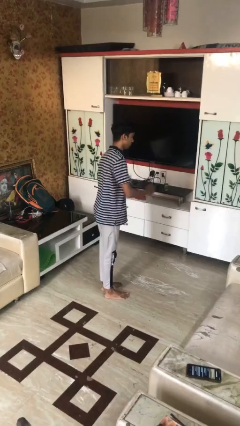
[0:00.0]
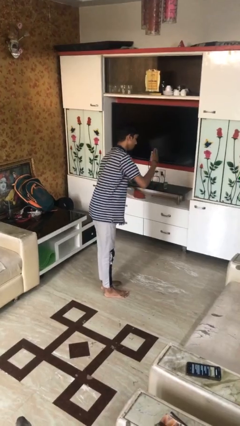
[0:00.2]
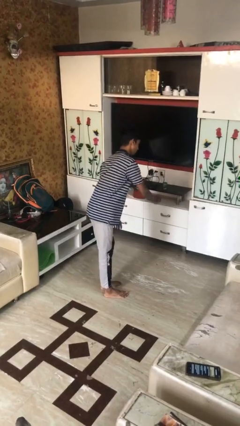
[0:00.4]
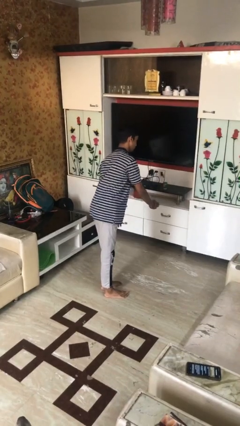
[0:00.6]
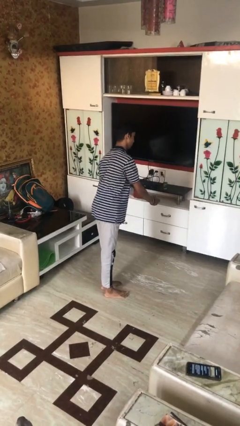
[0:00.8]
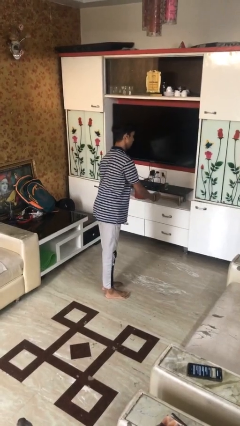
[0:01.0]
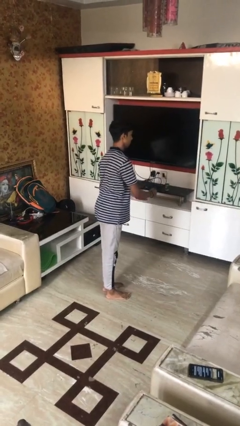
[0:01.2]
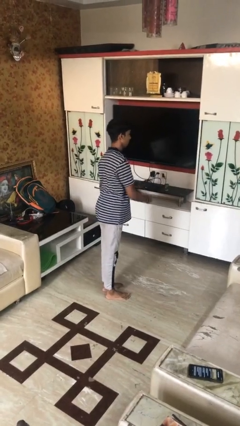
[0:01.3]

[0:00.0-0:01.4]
person karate chop

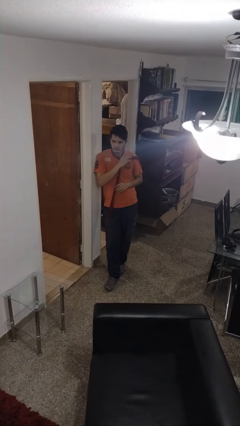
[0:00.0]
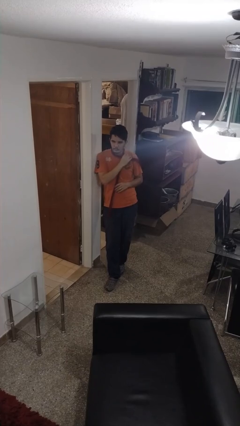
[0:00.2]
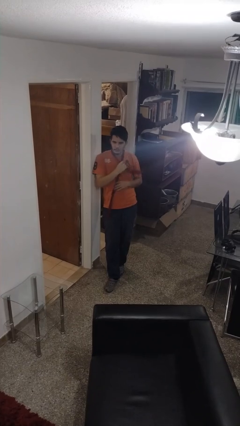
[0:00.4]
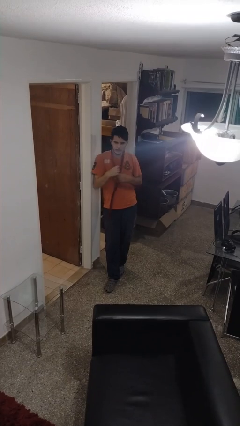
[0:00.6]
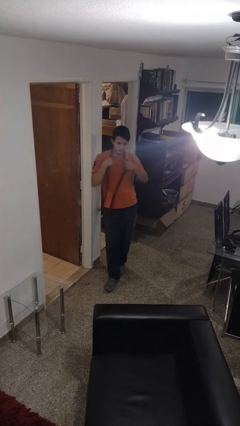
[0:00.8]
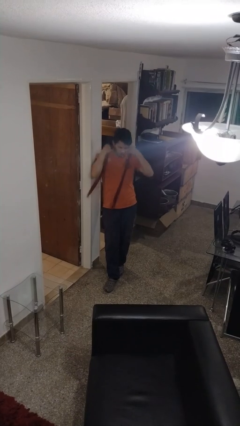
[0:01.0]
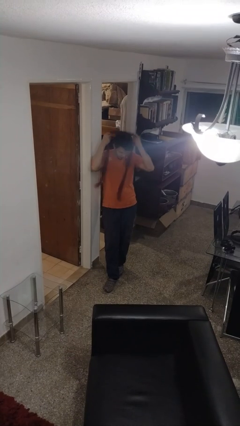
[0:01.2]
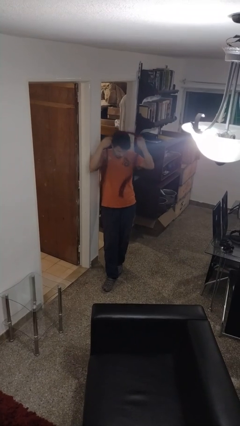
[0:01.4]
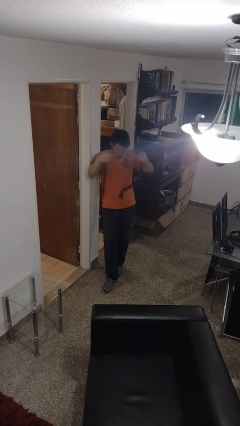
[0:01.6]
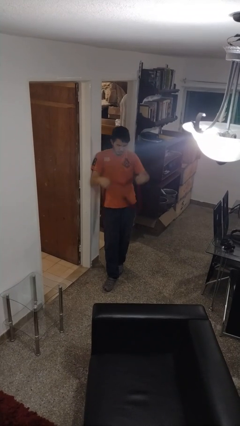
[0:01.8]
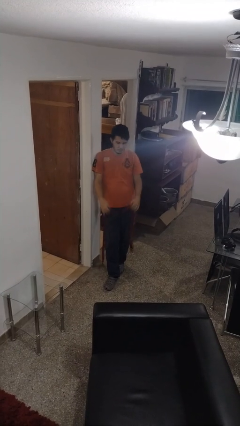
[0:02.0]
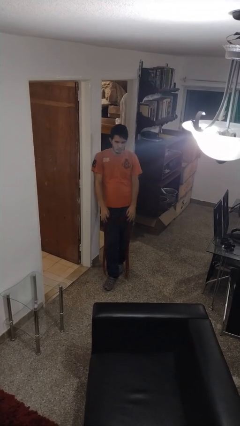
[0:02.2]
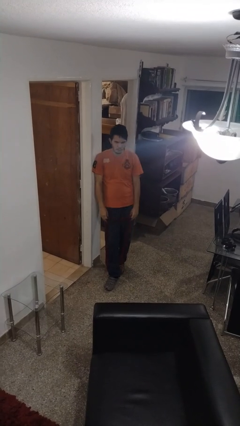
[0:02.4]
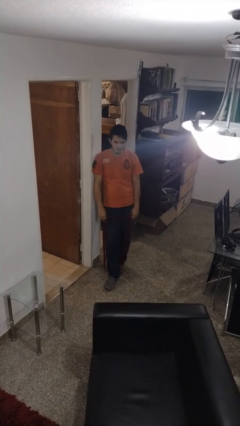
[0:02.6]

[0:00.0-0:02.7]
person takes off scarf

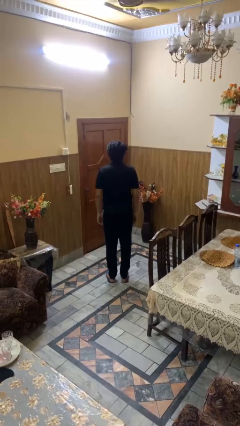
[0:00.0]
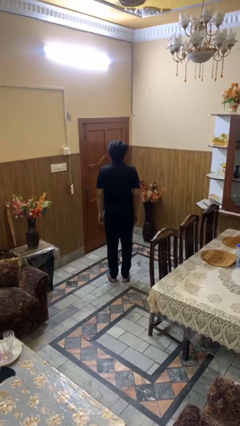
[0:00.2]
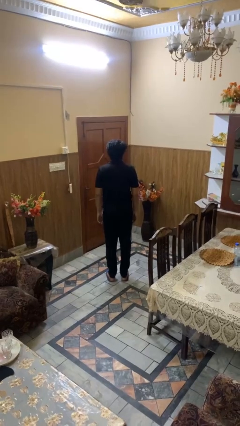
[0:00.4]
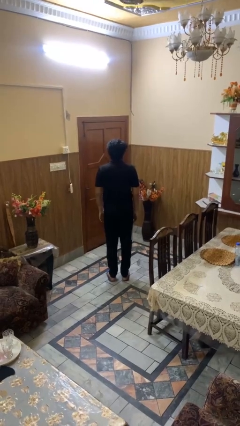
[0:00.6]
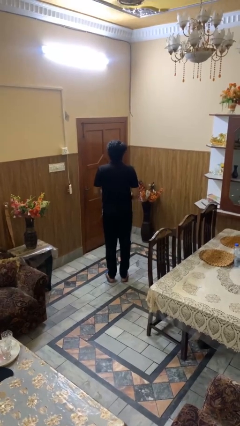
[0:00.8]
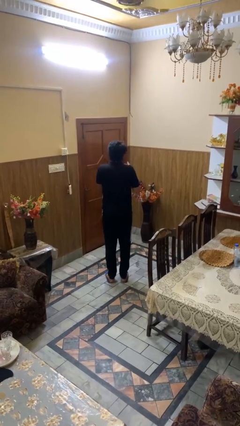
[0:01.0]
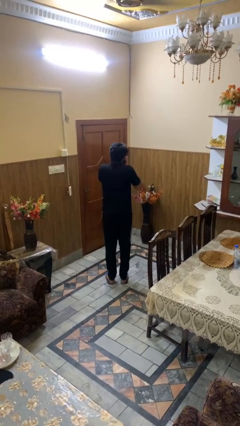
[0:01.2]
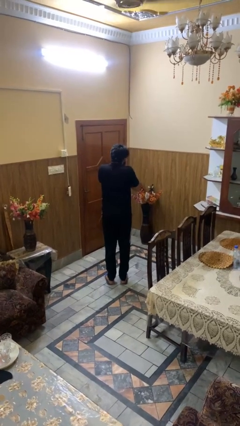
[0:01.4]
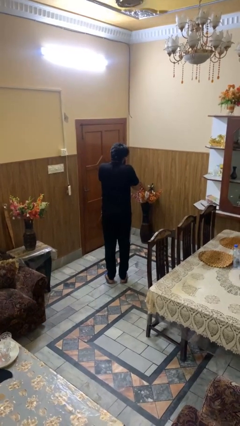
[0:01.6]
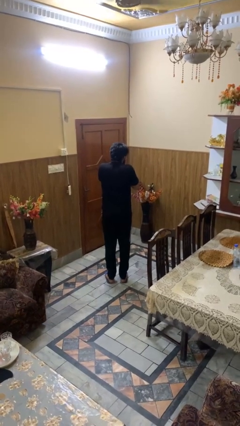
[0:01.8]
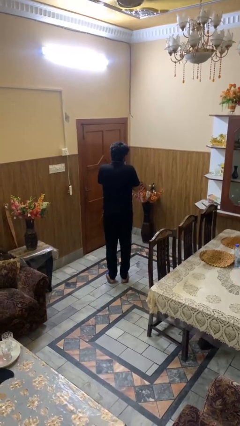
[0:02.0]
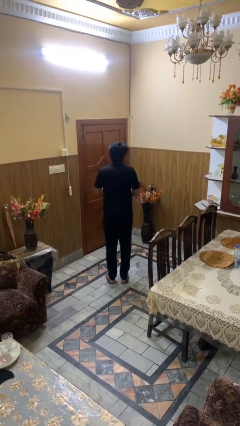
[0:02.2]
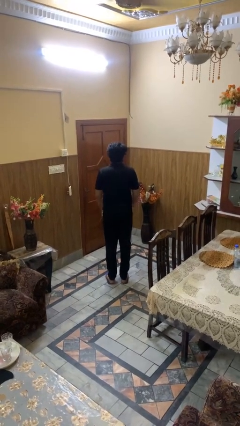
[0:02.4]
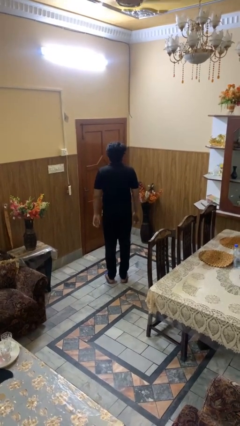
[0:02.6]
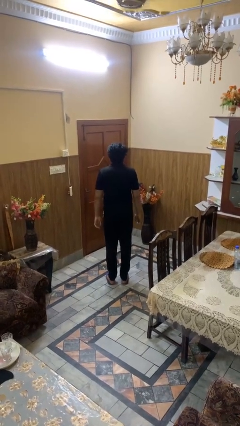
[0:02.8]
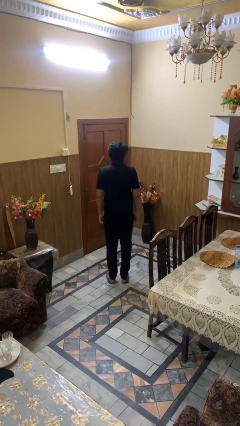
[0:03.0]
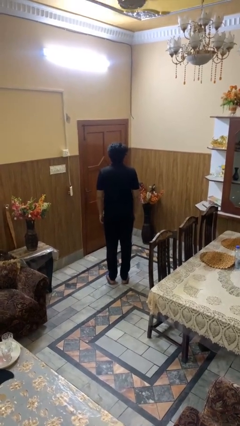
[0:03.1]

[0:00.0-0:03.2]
person sneezes into hand

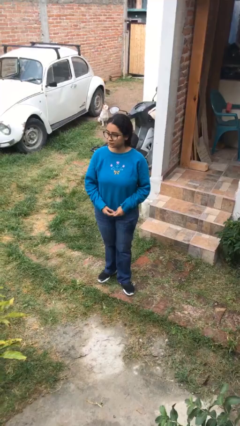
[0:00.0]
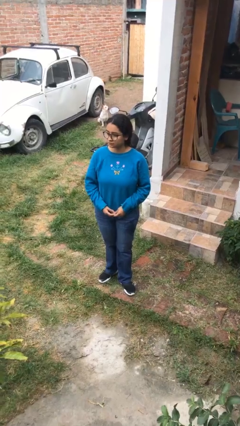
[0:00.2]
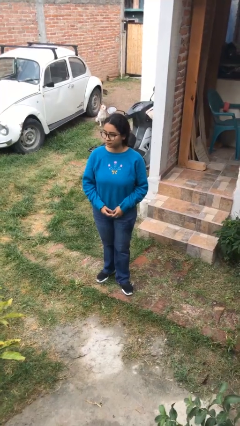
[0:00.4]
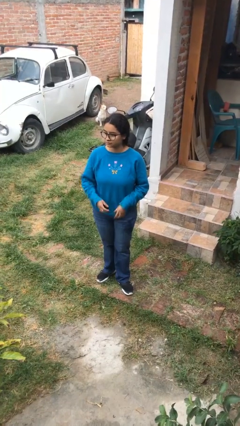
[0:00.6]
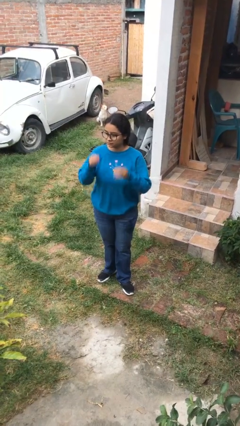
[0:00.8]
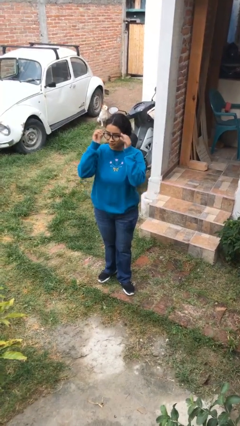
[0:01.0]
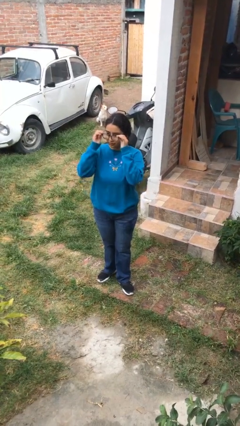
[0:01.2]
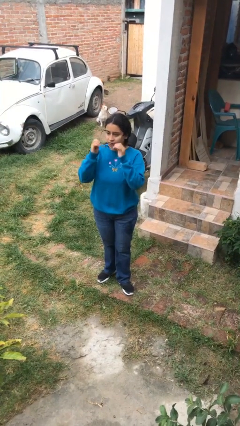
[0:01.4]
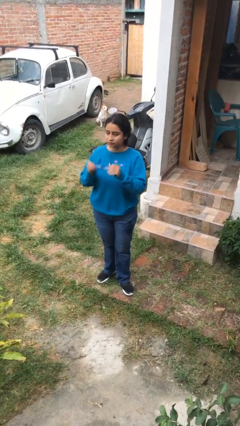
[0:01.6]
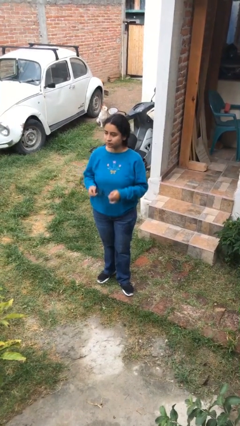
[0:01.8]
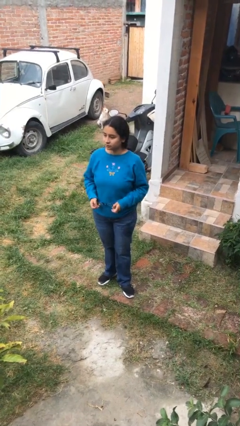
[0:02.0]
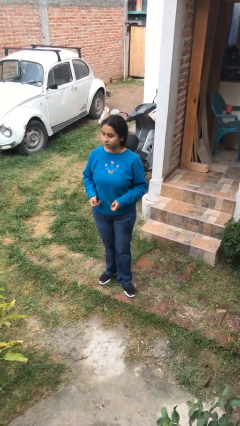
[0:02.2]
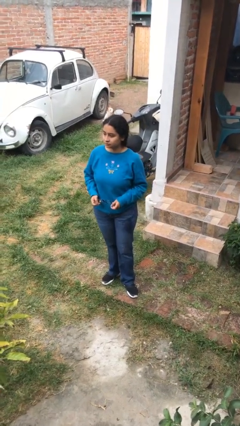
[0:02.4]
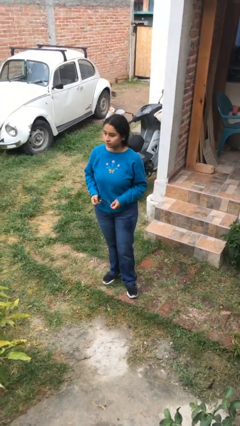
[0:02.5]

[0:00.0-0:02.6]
person takes off glasses

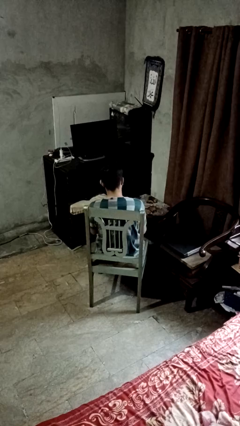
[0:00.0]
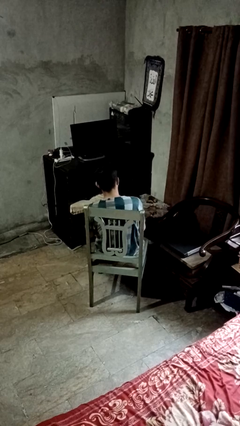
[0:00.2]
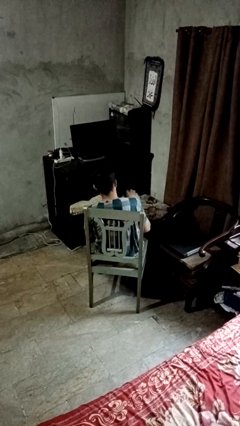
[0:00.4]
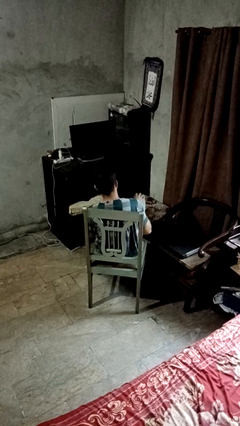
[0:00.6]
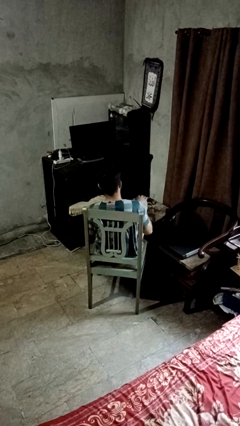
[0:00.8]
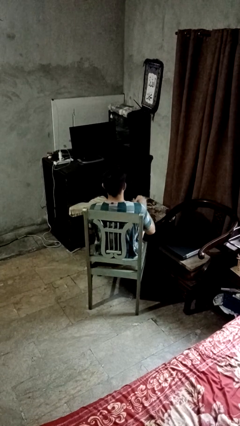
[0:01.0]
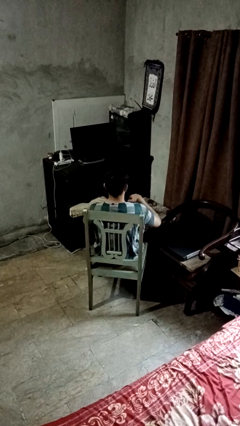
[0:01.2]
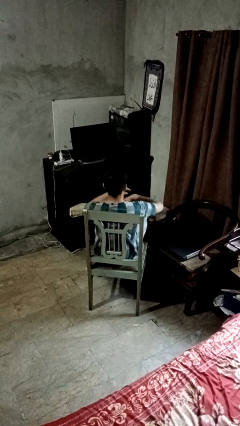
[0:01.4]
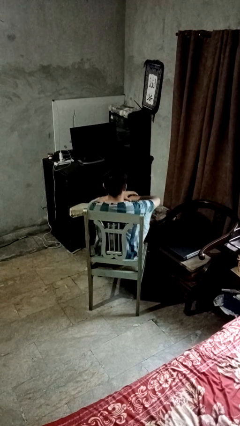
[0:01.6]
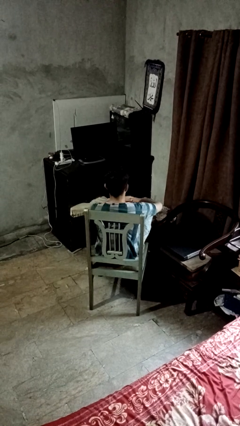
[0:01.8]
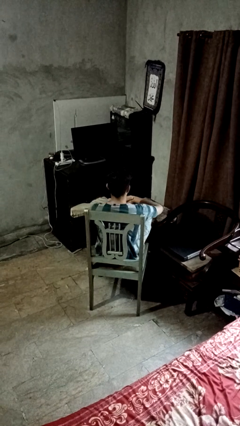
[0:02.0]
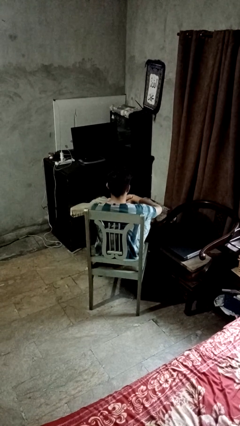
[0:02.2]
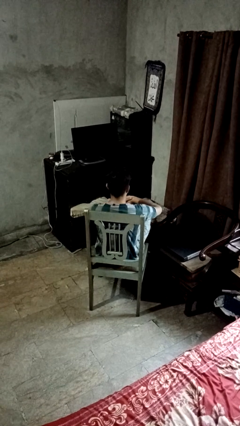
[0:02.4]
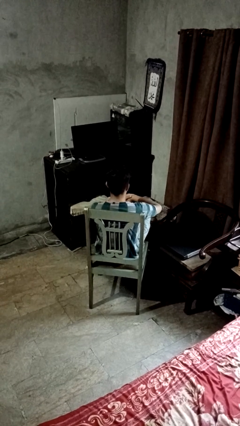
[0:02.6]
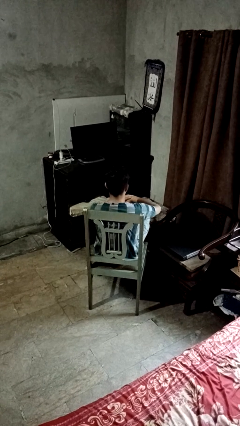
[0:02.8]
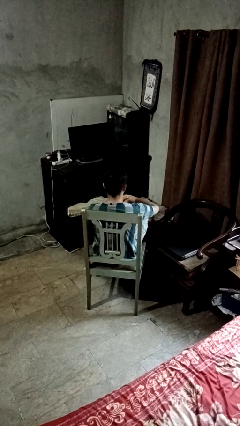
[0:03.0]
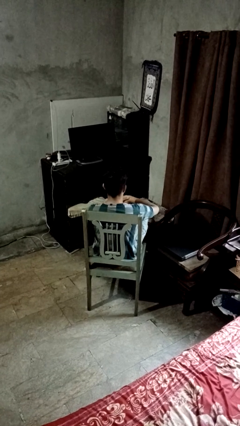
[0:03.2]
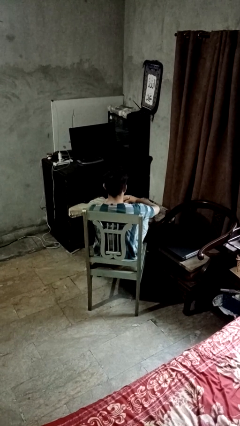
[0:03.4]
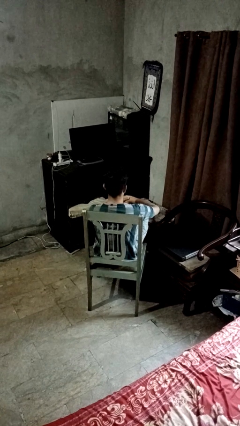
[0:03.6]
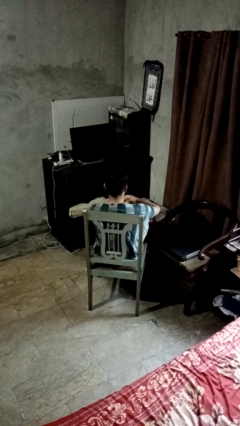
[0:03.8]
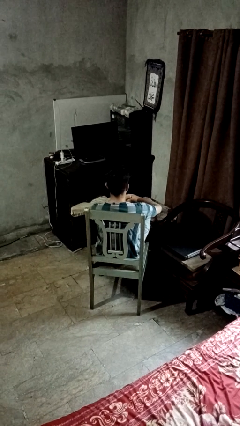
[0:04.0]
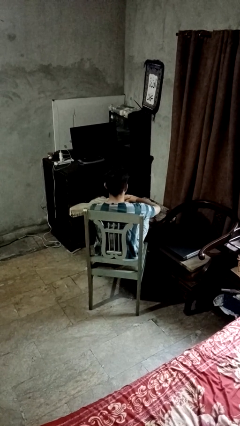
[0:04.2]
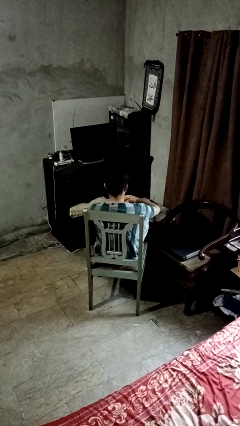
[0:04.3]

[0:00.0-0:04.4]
person puts feet up

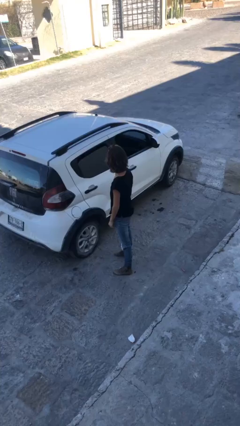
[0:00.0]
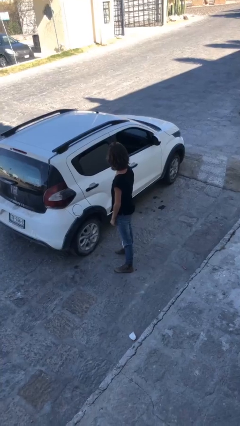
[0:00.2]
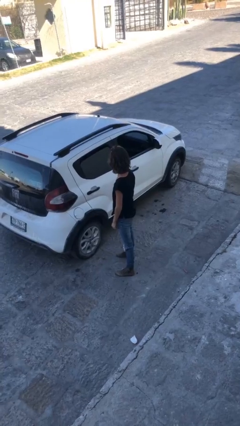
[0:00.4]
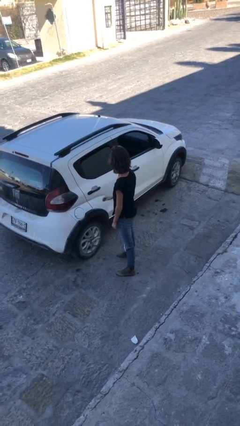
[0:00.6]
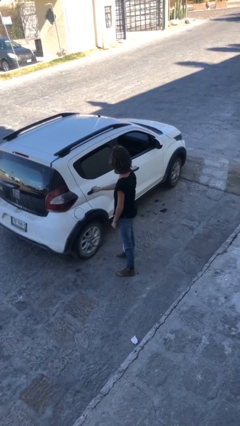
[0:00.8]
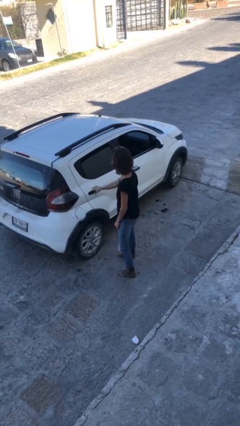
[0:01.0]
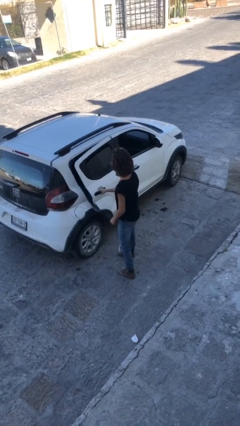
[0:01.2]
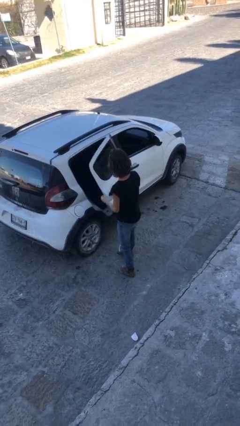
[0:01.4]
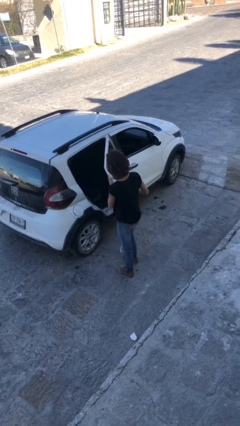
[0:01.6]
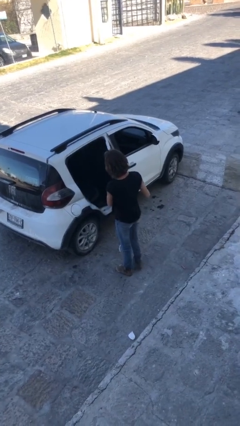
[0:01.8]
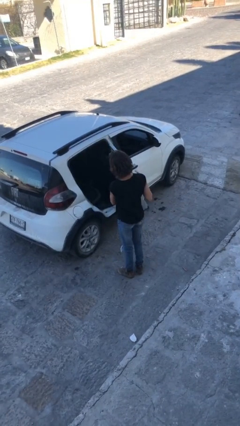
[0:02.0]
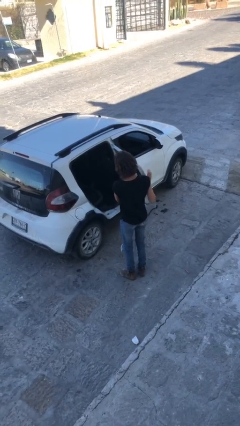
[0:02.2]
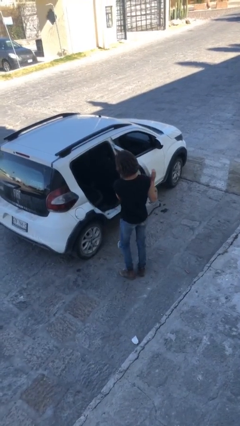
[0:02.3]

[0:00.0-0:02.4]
person opens car door

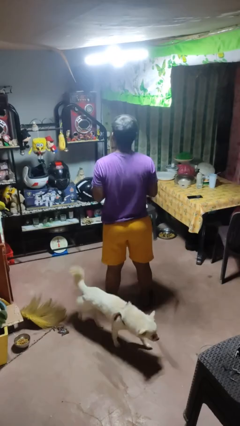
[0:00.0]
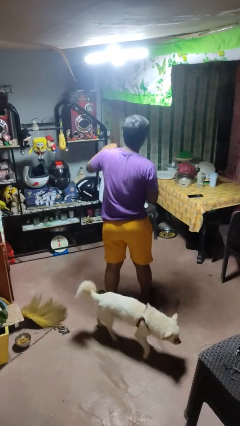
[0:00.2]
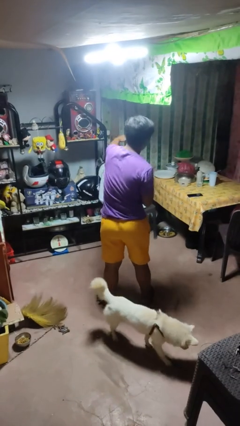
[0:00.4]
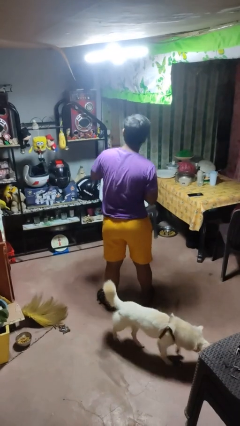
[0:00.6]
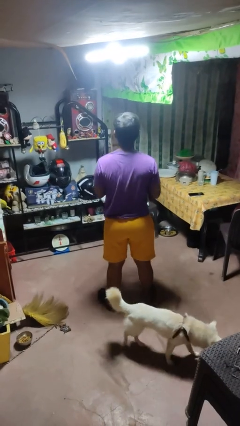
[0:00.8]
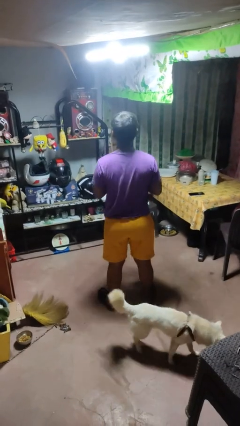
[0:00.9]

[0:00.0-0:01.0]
person punches
